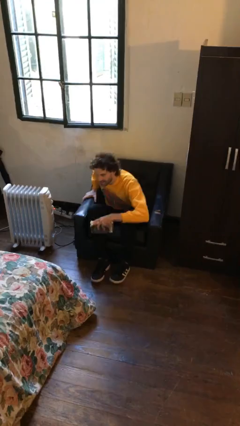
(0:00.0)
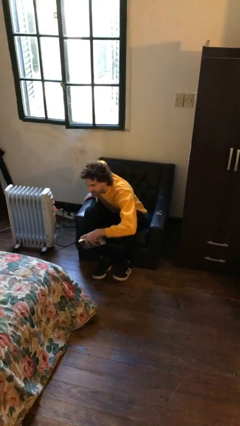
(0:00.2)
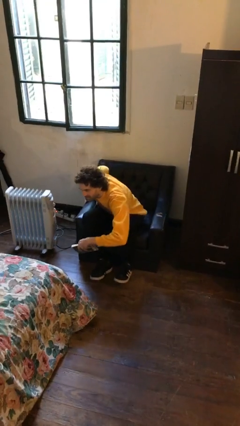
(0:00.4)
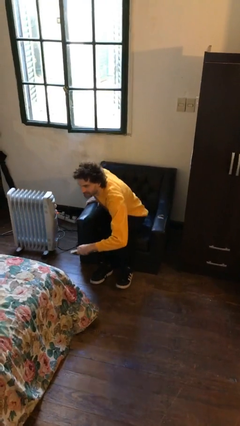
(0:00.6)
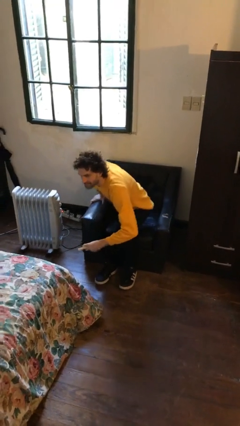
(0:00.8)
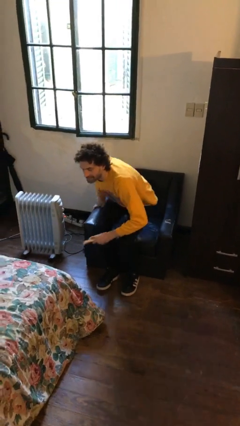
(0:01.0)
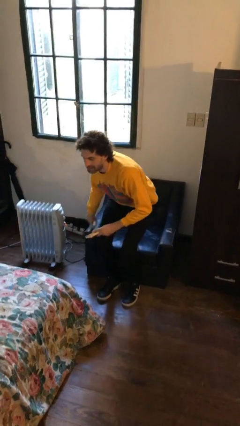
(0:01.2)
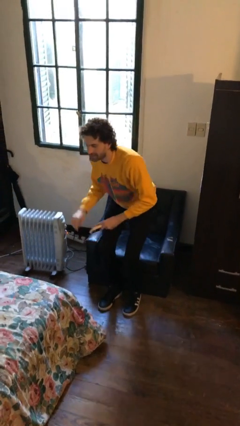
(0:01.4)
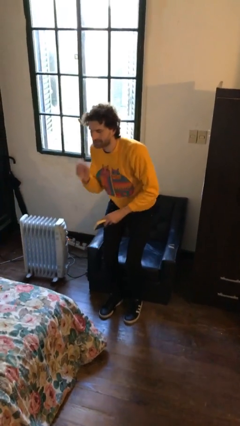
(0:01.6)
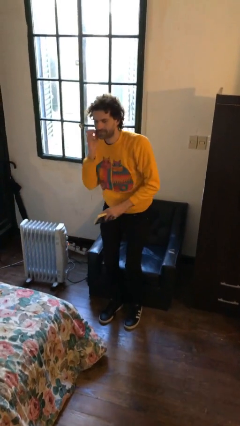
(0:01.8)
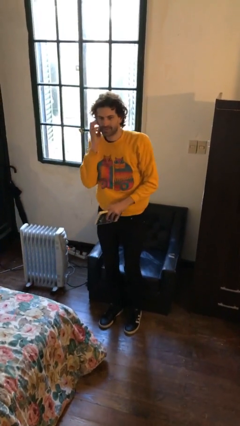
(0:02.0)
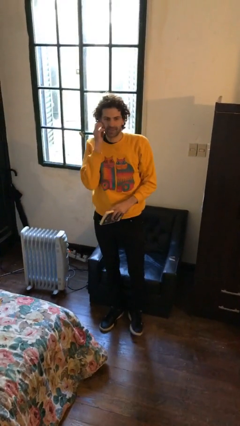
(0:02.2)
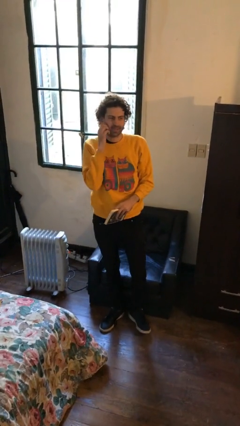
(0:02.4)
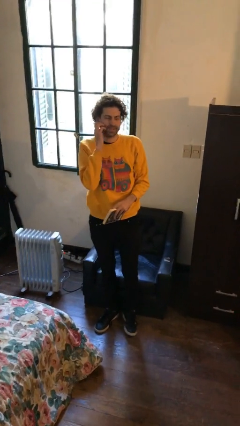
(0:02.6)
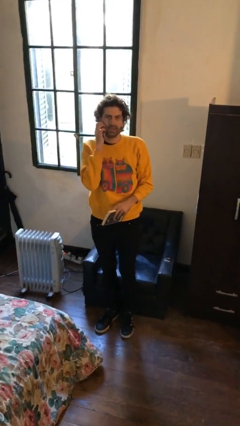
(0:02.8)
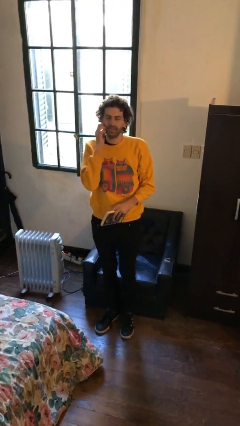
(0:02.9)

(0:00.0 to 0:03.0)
person stands up

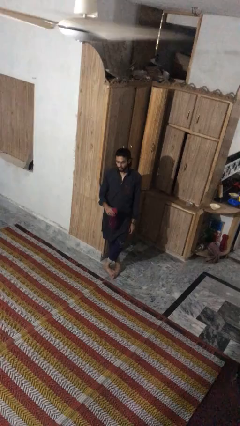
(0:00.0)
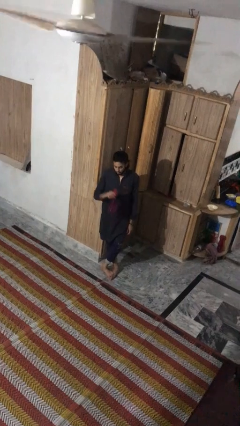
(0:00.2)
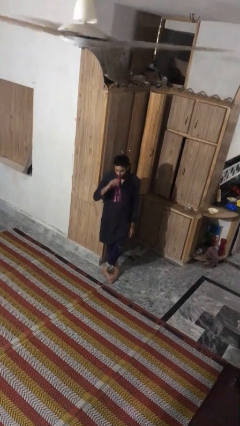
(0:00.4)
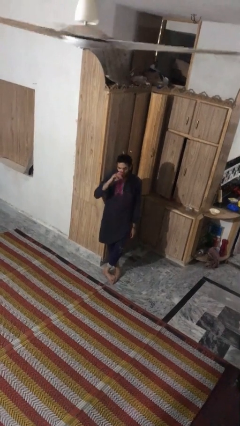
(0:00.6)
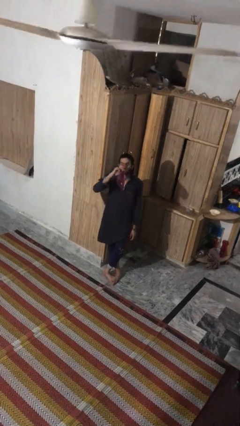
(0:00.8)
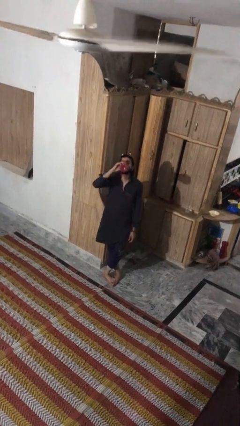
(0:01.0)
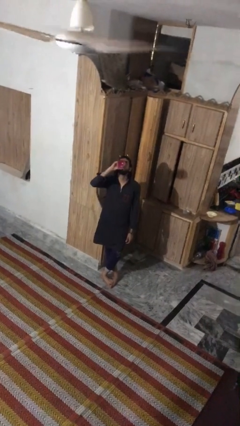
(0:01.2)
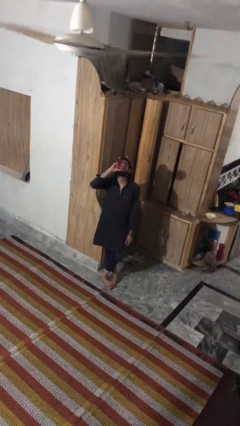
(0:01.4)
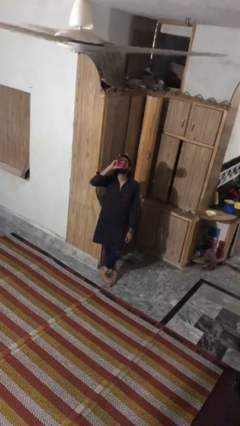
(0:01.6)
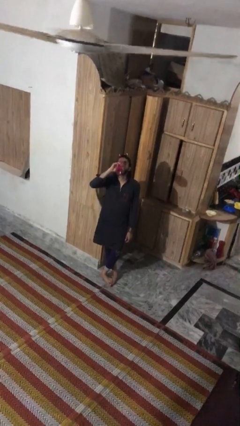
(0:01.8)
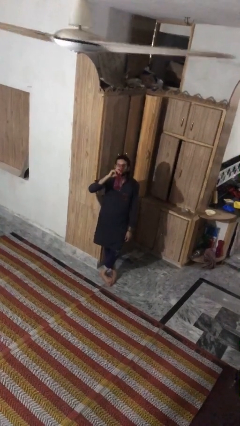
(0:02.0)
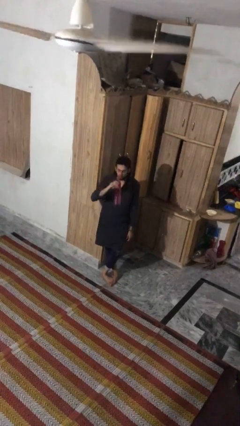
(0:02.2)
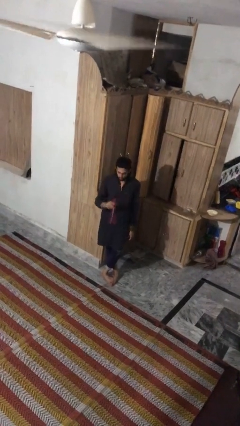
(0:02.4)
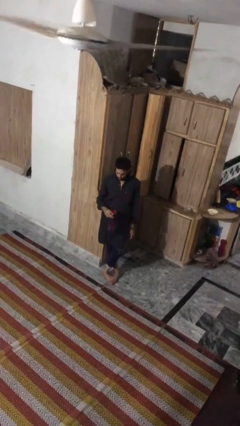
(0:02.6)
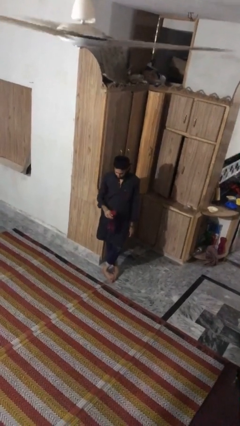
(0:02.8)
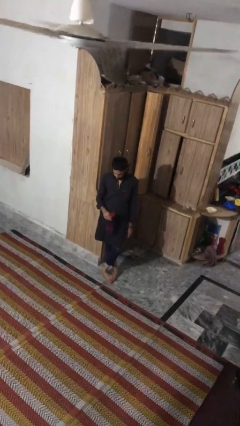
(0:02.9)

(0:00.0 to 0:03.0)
person drinks from bottle

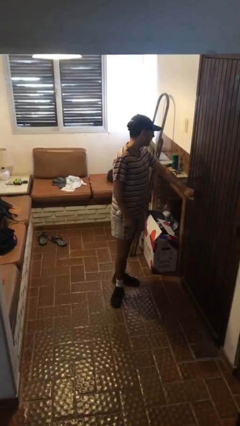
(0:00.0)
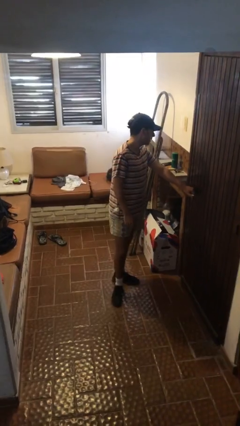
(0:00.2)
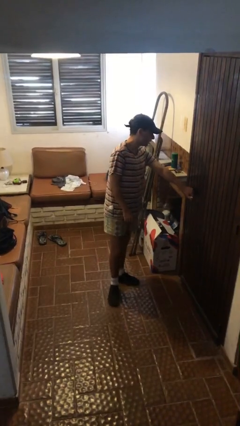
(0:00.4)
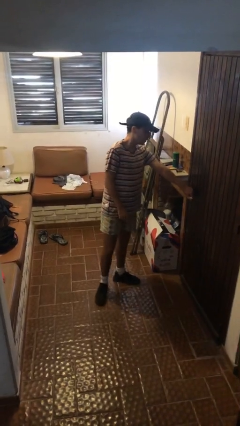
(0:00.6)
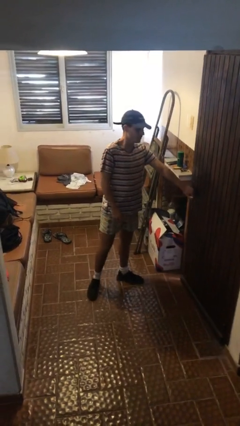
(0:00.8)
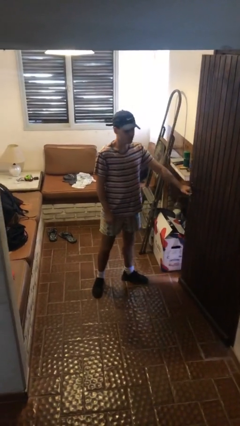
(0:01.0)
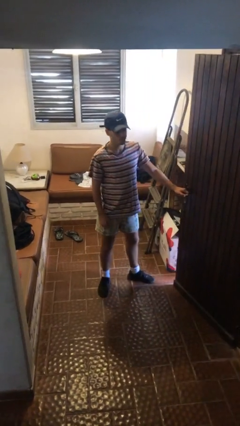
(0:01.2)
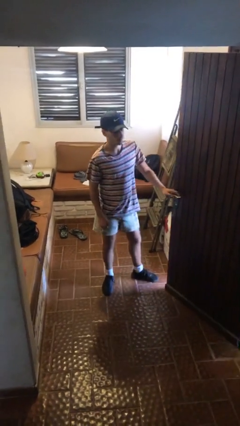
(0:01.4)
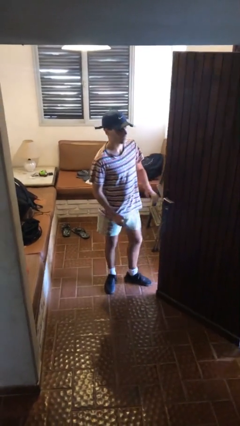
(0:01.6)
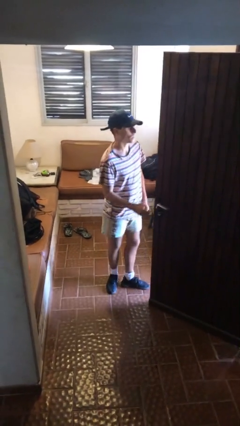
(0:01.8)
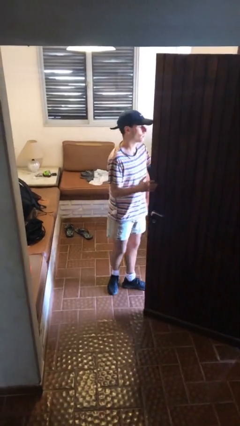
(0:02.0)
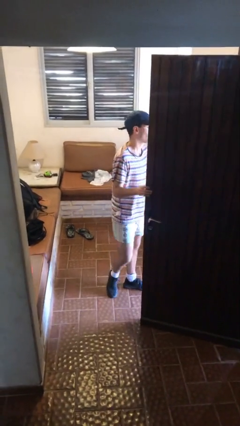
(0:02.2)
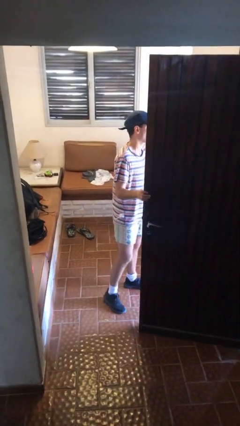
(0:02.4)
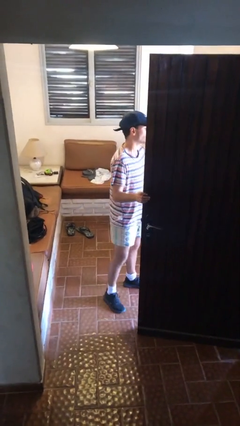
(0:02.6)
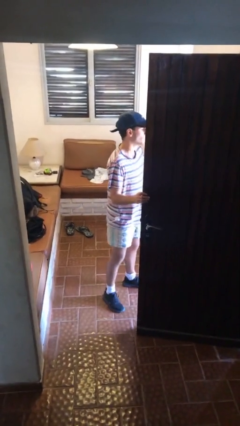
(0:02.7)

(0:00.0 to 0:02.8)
person opens facility door

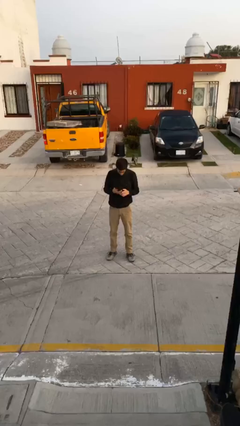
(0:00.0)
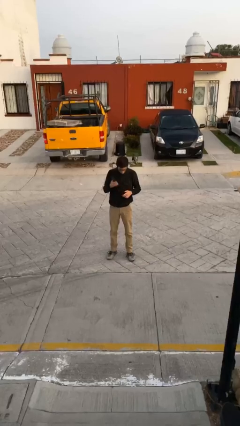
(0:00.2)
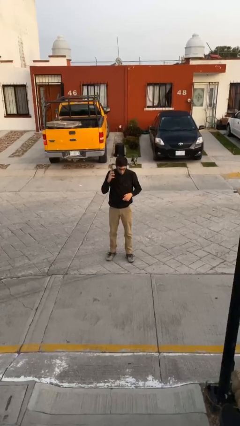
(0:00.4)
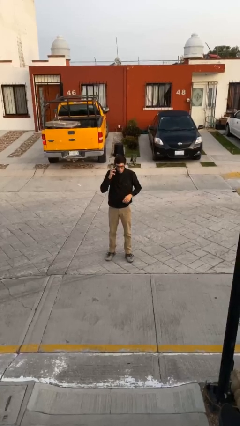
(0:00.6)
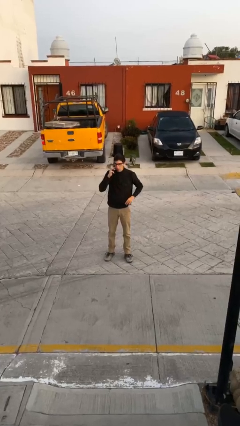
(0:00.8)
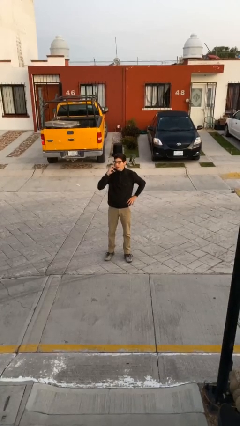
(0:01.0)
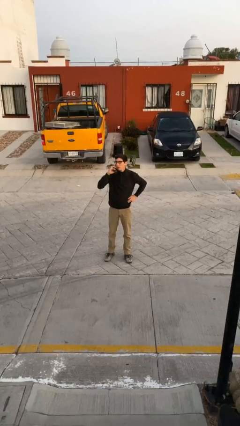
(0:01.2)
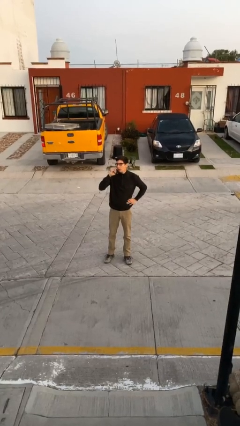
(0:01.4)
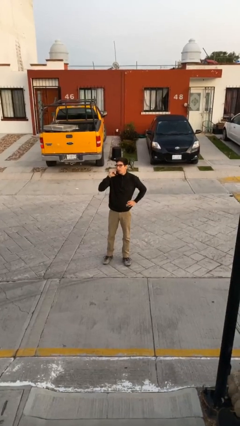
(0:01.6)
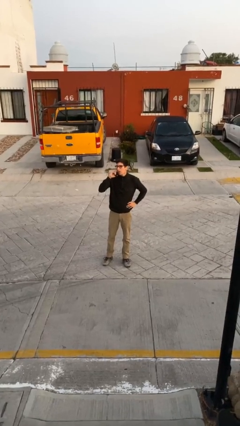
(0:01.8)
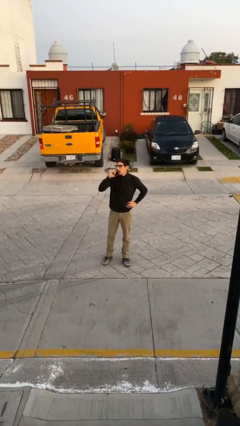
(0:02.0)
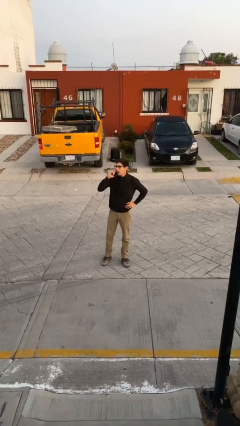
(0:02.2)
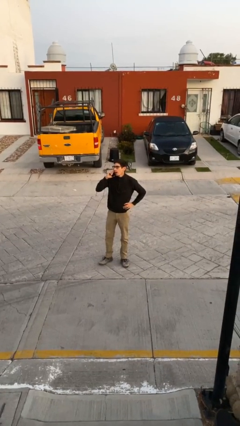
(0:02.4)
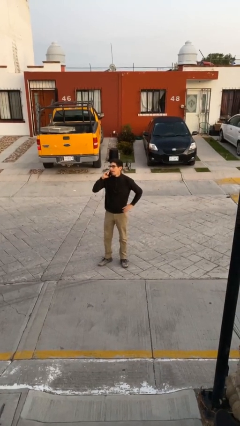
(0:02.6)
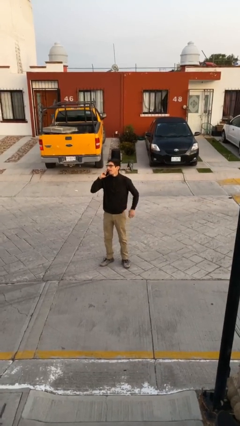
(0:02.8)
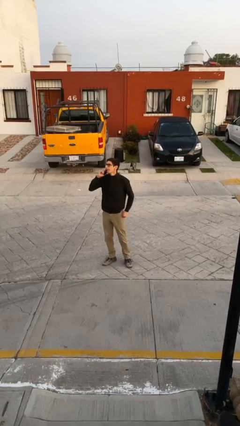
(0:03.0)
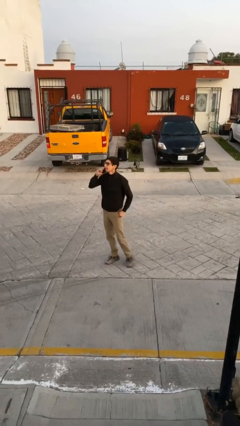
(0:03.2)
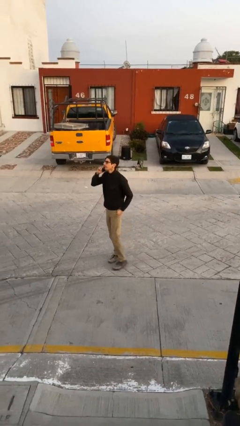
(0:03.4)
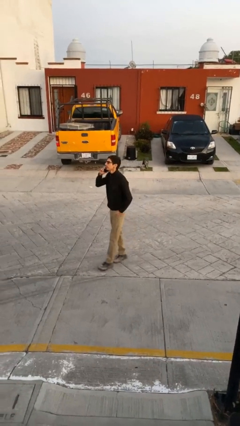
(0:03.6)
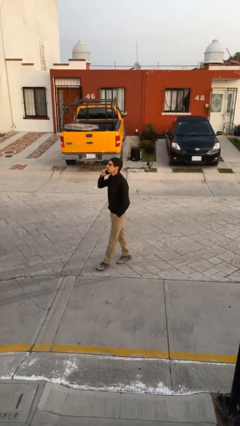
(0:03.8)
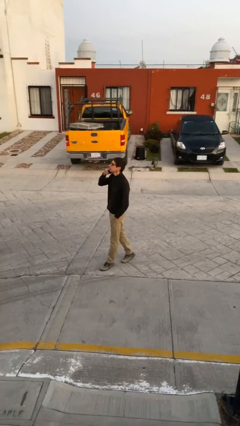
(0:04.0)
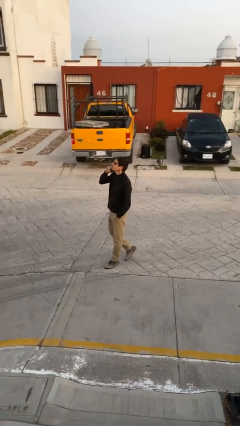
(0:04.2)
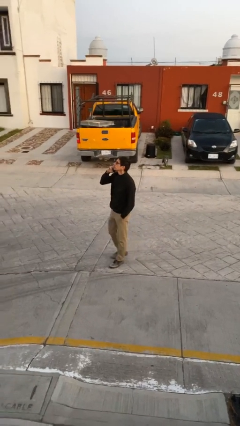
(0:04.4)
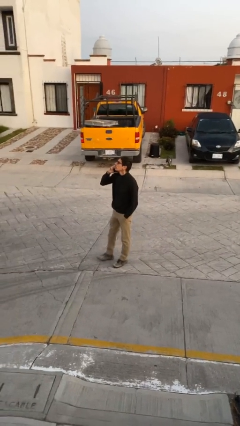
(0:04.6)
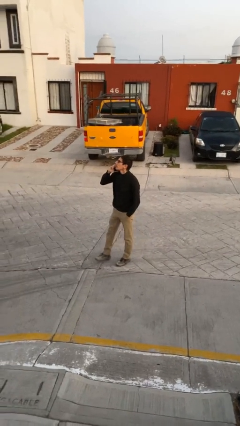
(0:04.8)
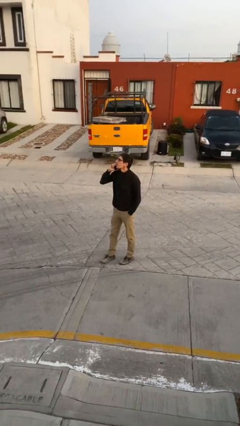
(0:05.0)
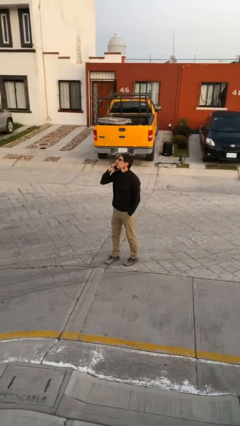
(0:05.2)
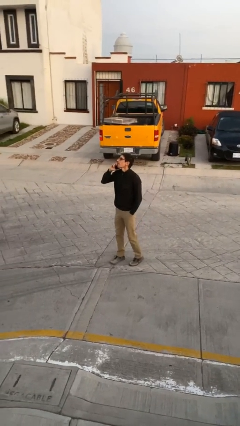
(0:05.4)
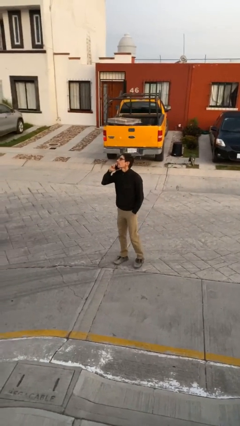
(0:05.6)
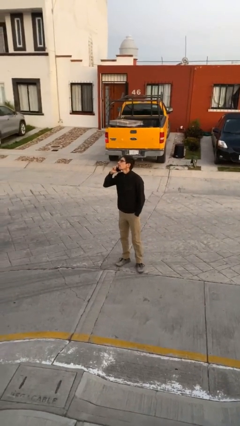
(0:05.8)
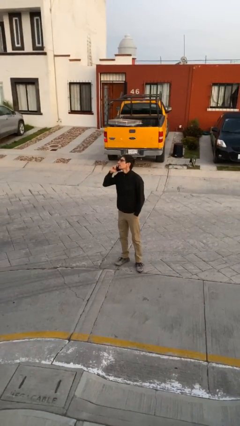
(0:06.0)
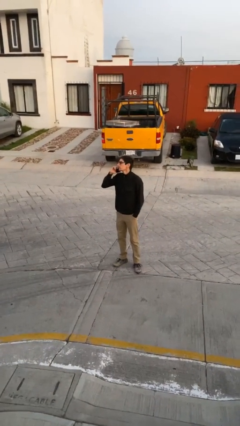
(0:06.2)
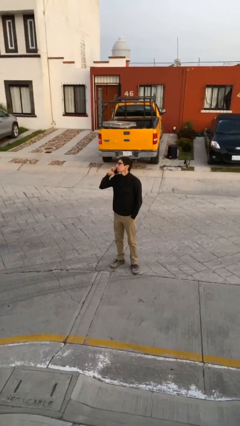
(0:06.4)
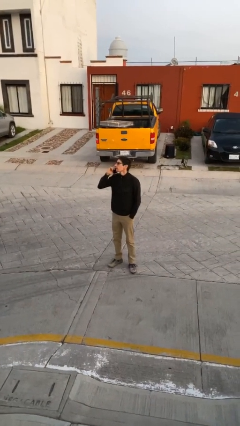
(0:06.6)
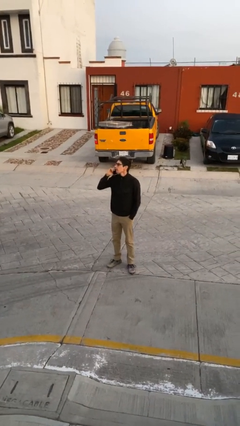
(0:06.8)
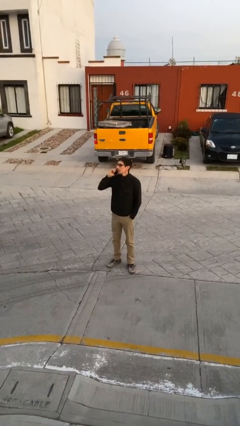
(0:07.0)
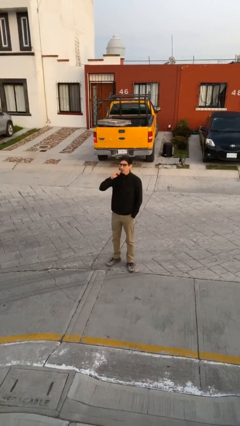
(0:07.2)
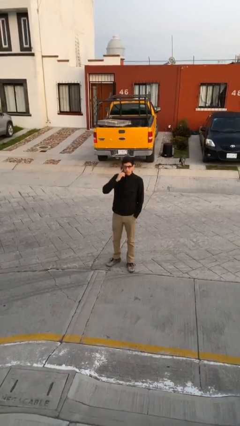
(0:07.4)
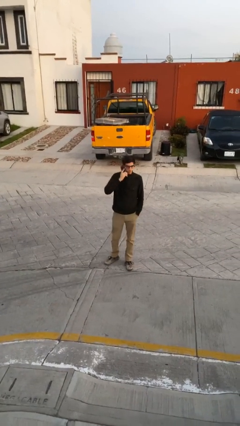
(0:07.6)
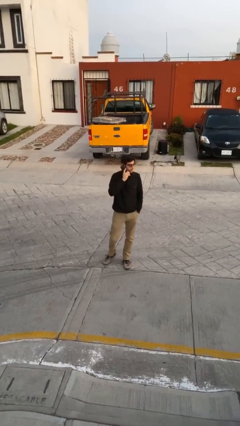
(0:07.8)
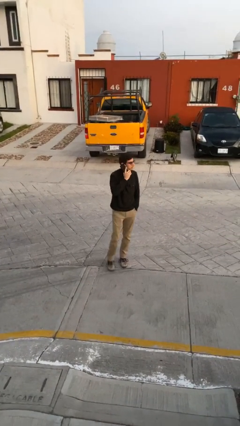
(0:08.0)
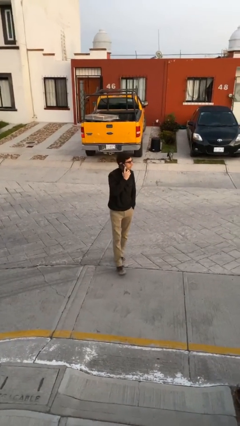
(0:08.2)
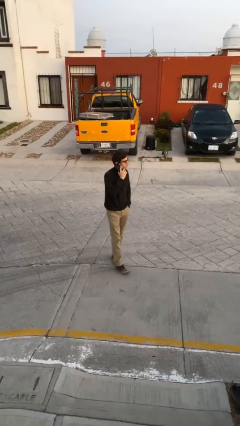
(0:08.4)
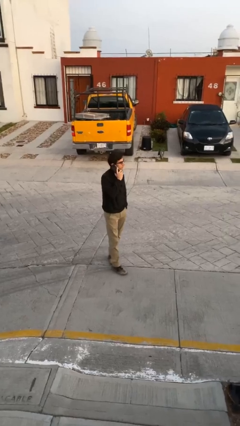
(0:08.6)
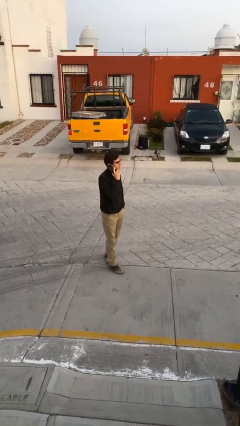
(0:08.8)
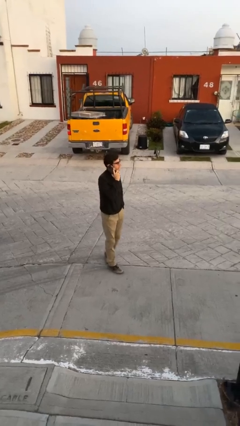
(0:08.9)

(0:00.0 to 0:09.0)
person talks on phone

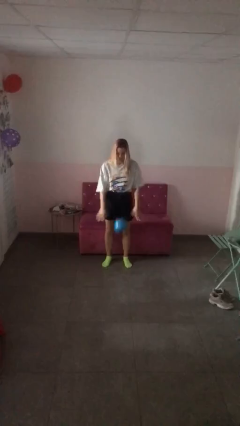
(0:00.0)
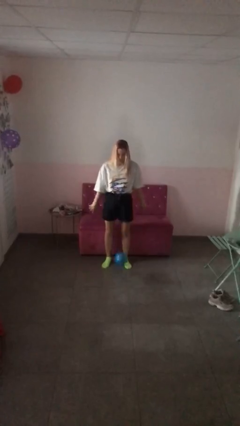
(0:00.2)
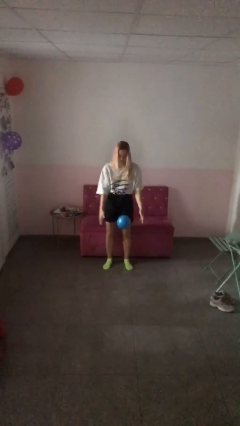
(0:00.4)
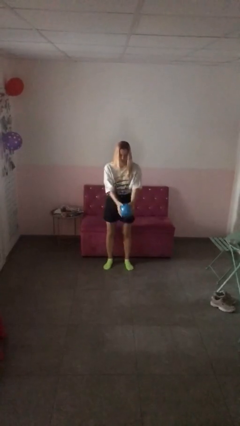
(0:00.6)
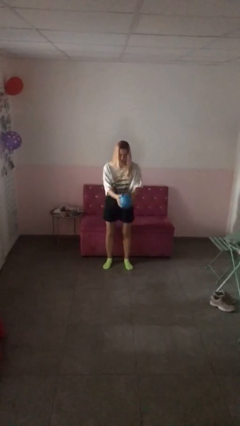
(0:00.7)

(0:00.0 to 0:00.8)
person bounces ball on floor
